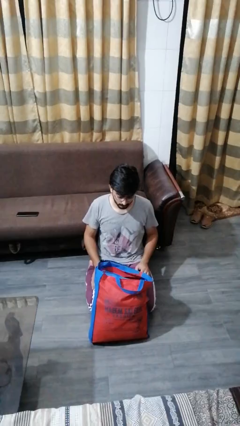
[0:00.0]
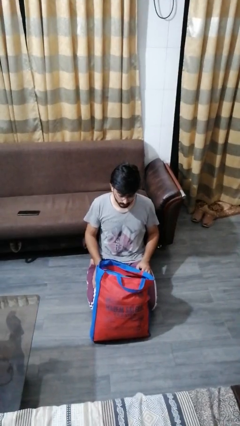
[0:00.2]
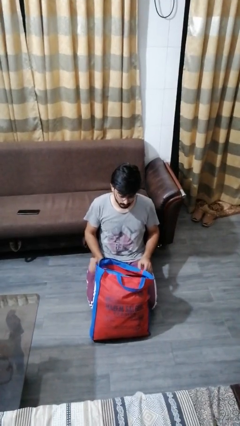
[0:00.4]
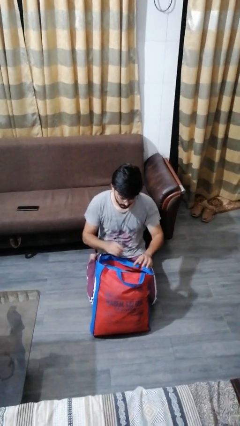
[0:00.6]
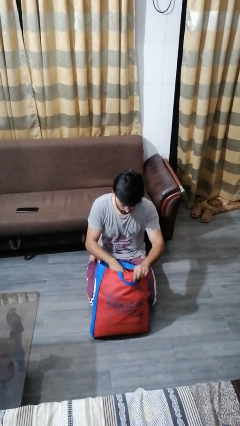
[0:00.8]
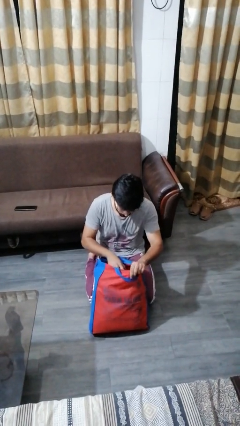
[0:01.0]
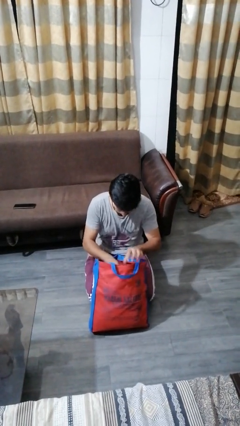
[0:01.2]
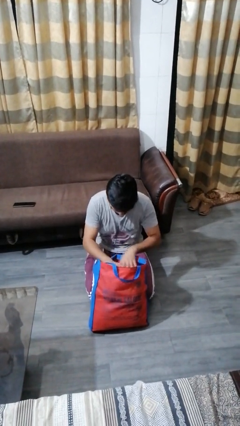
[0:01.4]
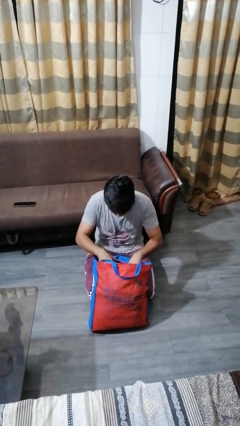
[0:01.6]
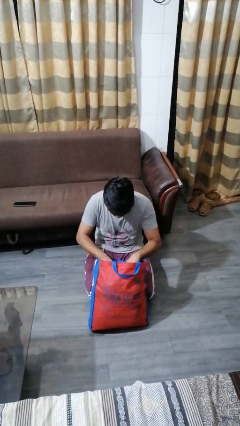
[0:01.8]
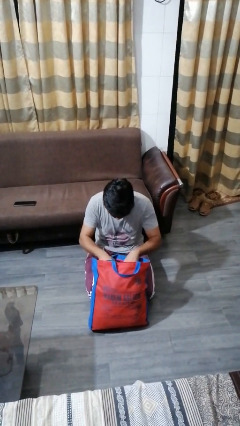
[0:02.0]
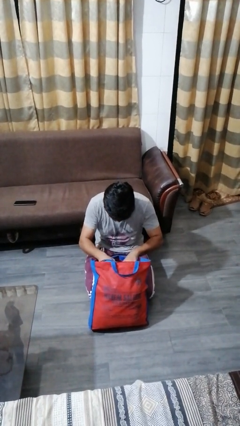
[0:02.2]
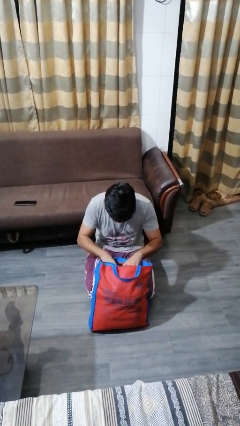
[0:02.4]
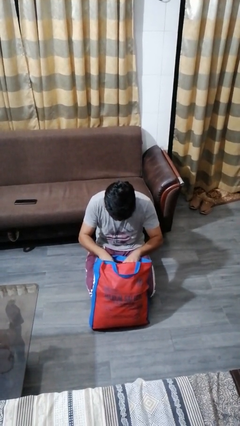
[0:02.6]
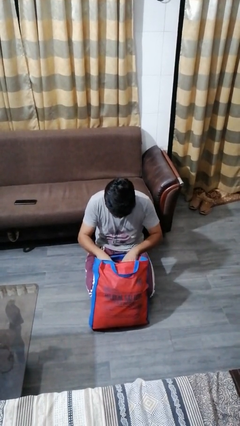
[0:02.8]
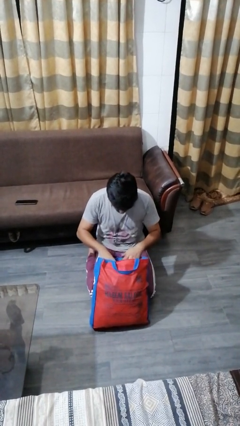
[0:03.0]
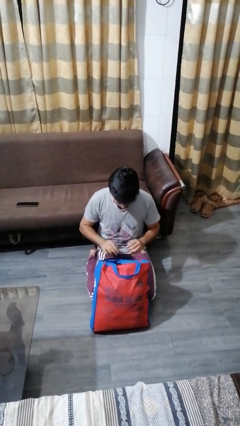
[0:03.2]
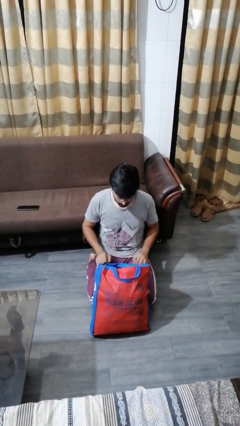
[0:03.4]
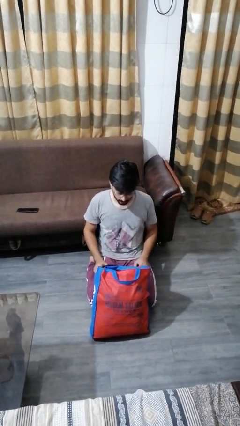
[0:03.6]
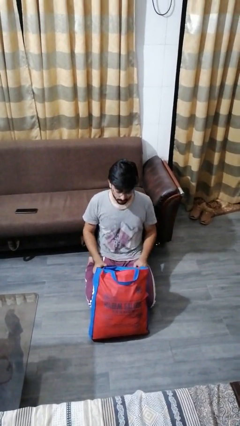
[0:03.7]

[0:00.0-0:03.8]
person searches in bag

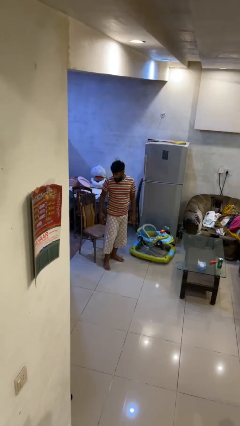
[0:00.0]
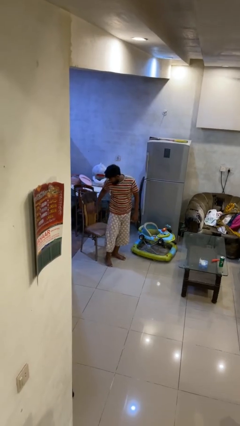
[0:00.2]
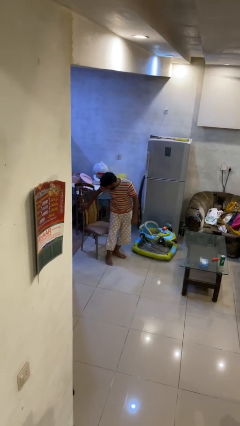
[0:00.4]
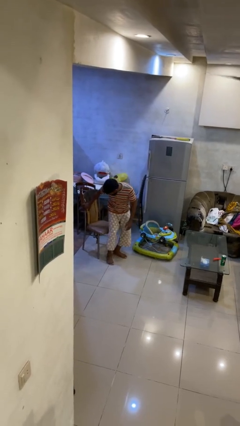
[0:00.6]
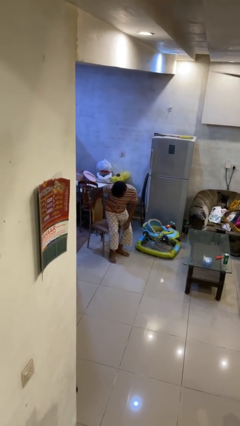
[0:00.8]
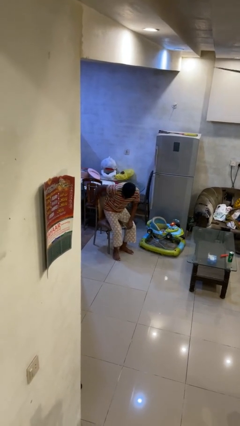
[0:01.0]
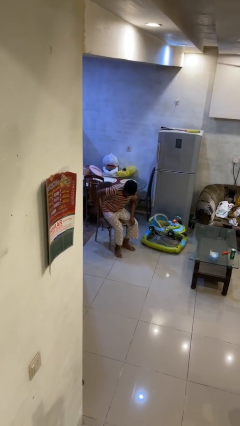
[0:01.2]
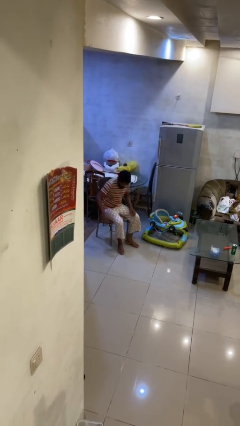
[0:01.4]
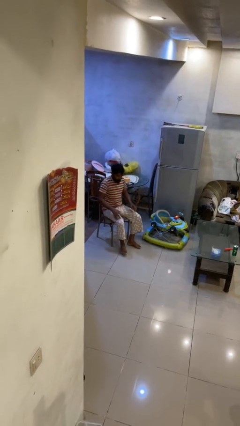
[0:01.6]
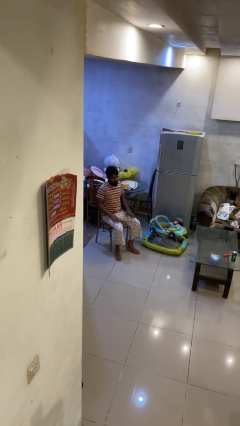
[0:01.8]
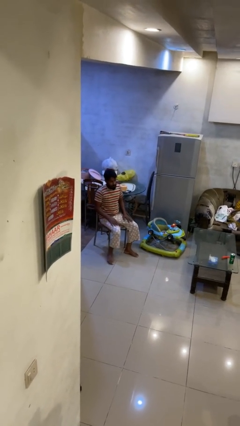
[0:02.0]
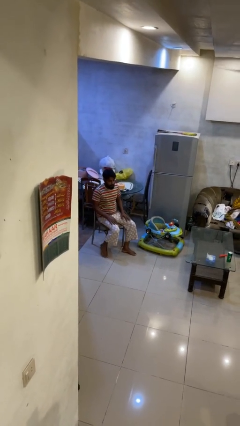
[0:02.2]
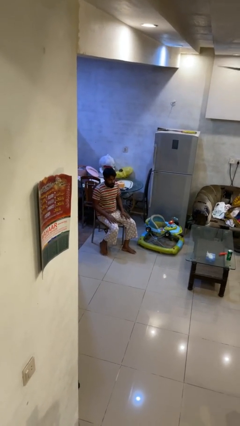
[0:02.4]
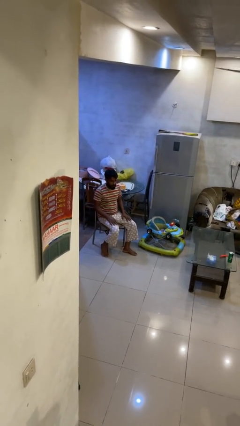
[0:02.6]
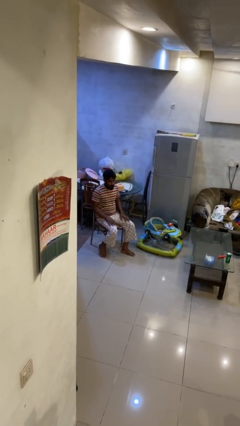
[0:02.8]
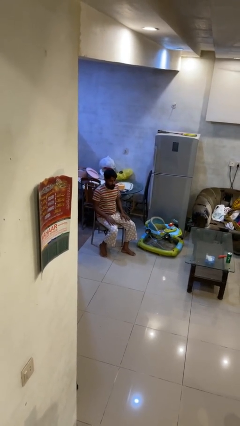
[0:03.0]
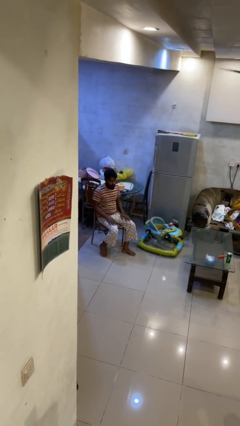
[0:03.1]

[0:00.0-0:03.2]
person sits down

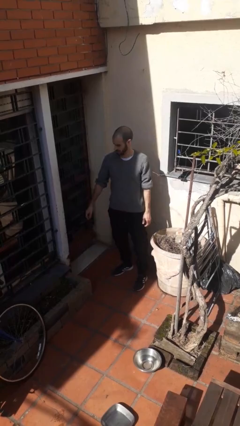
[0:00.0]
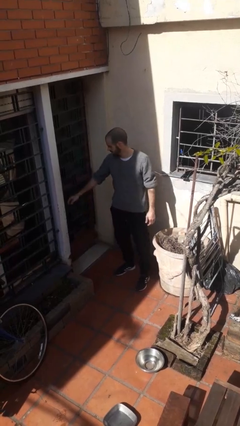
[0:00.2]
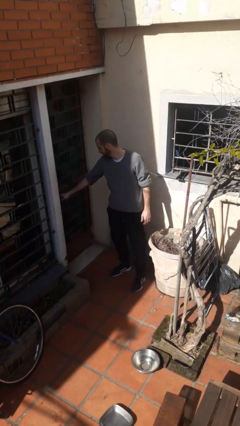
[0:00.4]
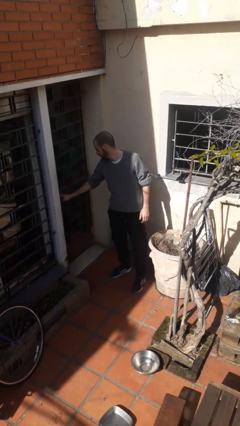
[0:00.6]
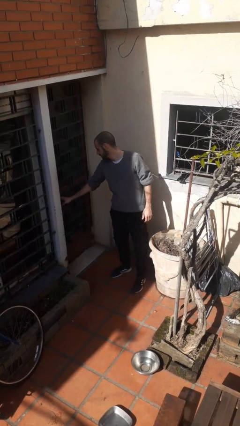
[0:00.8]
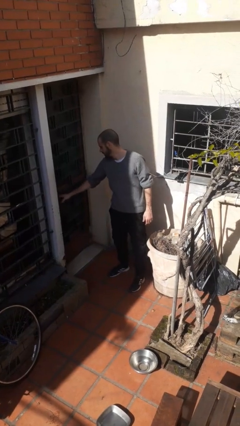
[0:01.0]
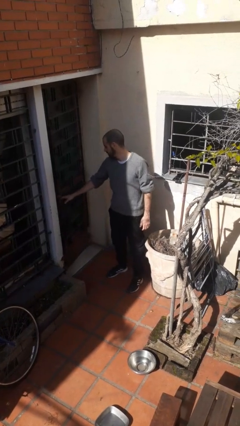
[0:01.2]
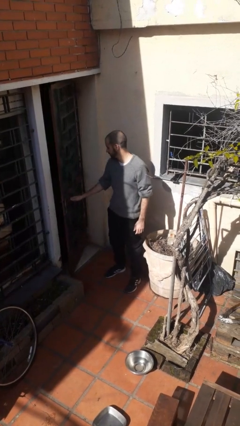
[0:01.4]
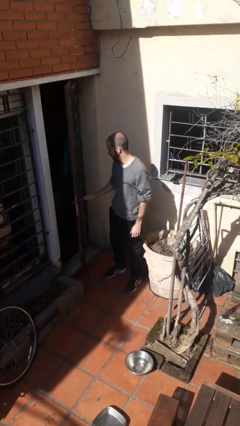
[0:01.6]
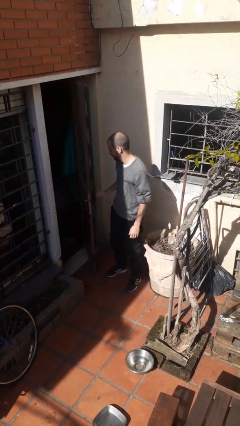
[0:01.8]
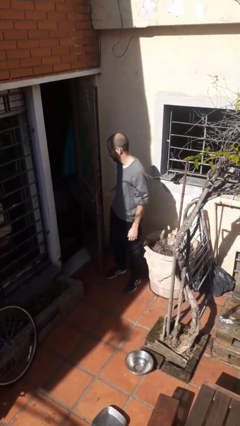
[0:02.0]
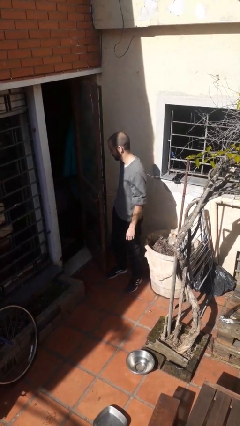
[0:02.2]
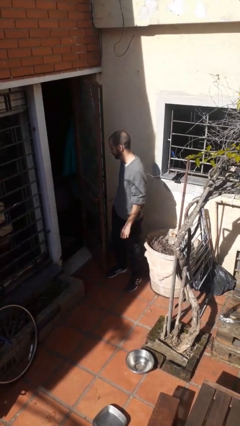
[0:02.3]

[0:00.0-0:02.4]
person opens facility door

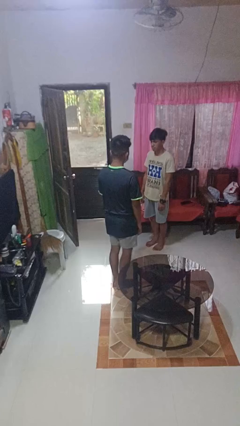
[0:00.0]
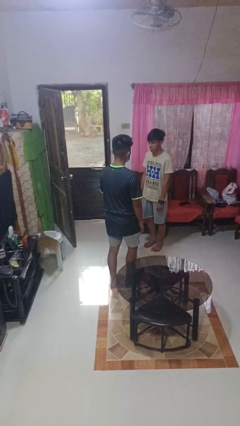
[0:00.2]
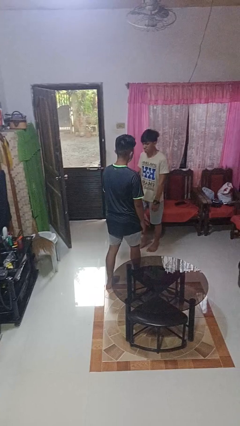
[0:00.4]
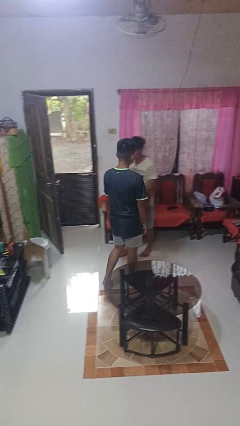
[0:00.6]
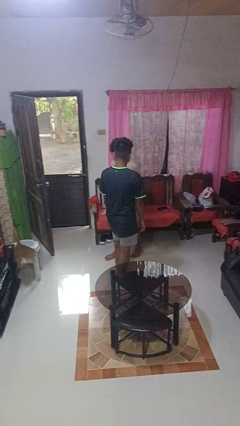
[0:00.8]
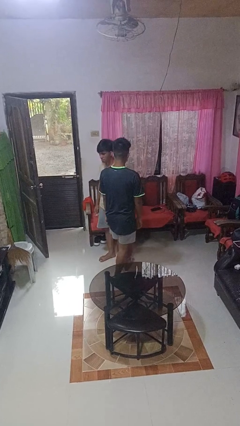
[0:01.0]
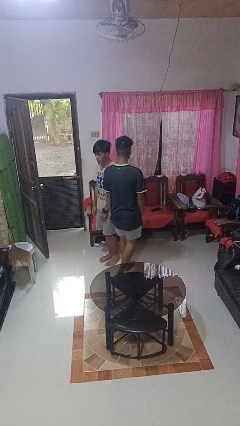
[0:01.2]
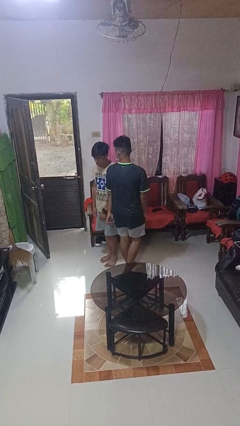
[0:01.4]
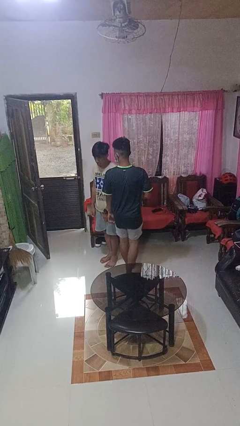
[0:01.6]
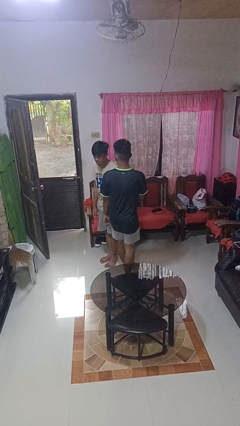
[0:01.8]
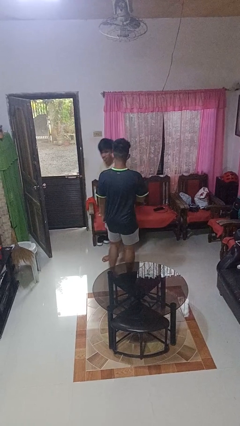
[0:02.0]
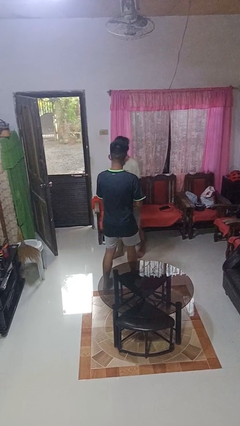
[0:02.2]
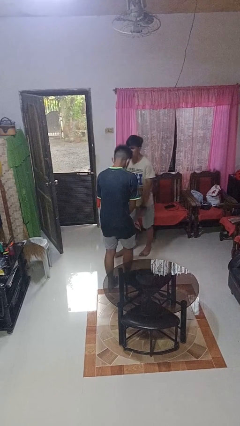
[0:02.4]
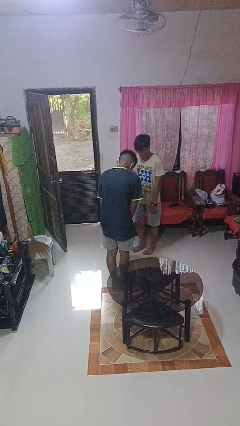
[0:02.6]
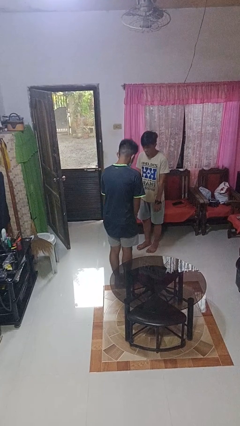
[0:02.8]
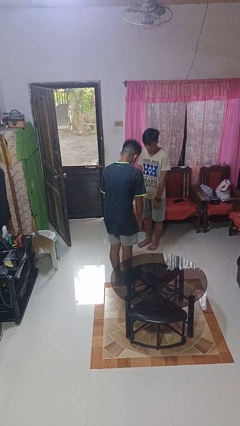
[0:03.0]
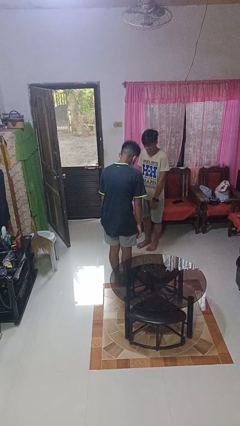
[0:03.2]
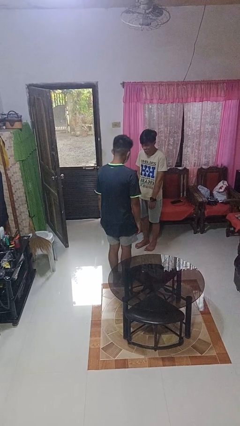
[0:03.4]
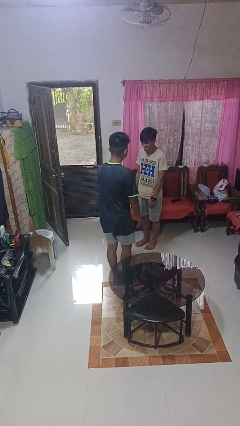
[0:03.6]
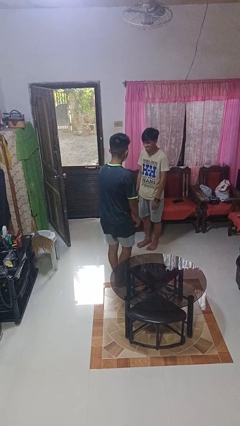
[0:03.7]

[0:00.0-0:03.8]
person bumps into person

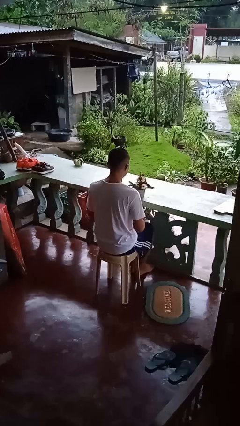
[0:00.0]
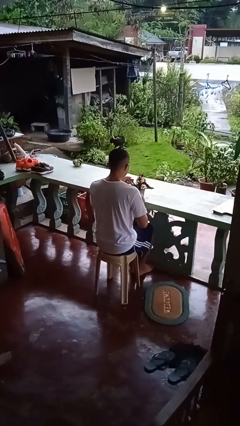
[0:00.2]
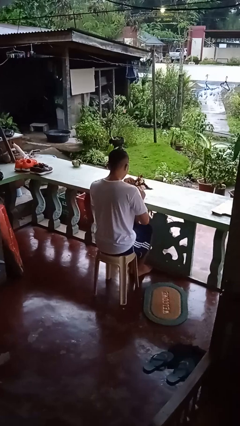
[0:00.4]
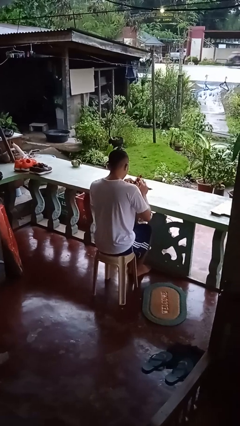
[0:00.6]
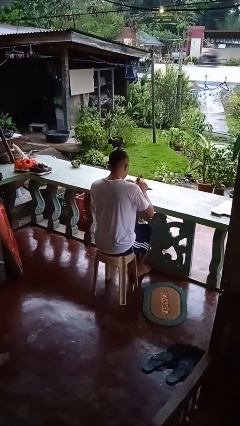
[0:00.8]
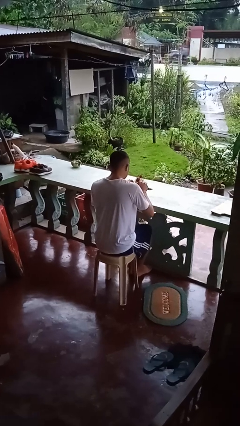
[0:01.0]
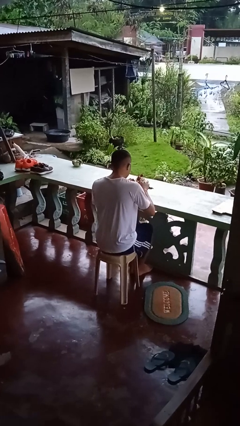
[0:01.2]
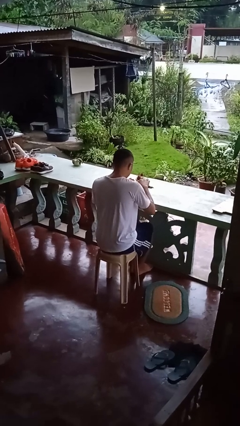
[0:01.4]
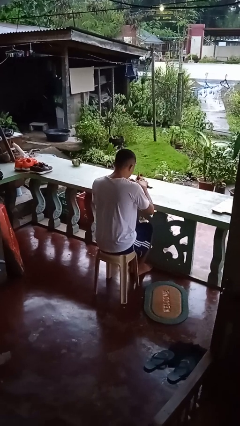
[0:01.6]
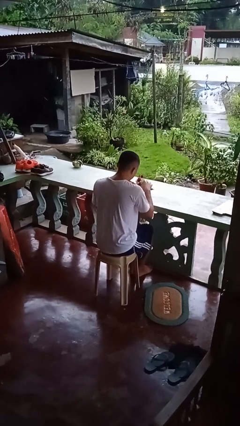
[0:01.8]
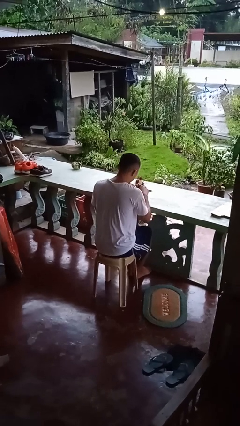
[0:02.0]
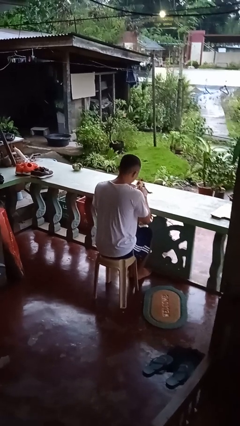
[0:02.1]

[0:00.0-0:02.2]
person arranges flowers in vase

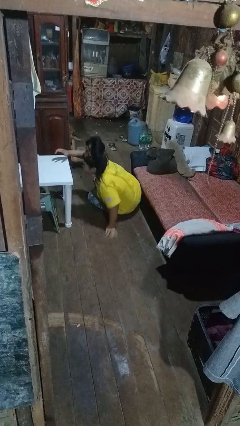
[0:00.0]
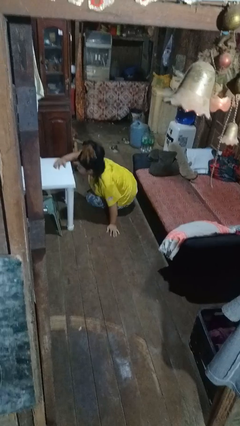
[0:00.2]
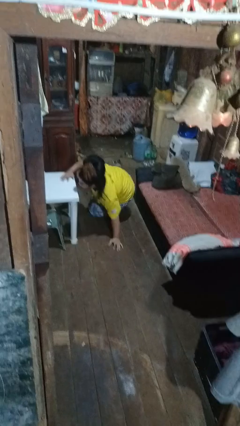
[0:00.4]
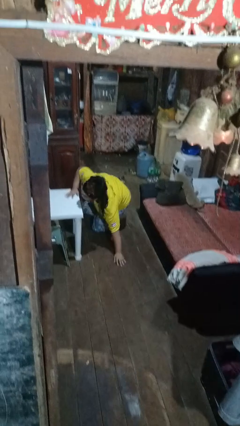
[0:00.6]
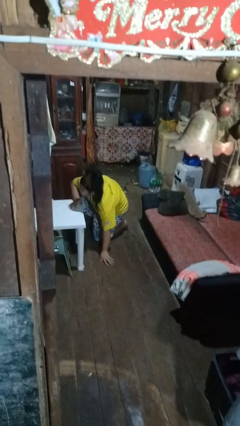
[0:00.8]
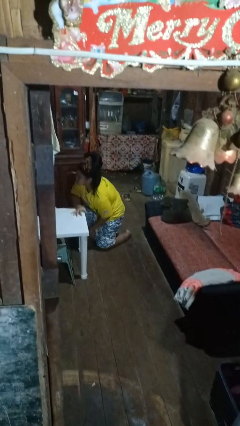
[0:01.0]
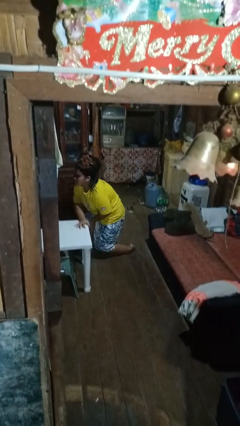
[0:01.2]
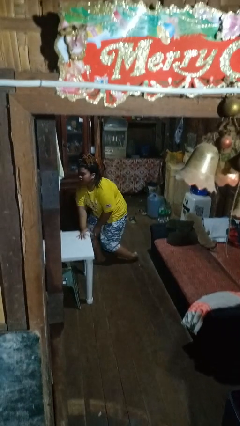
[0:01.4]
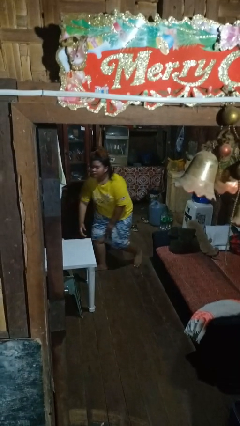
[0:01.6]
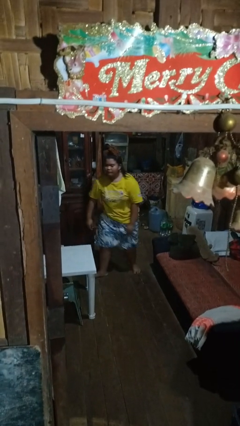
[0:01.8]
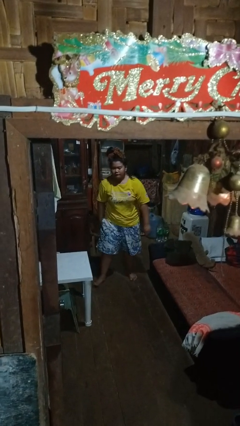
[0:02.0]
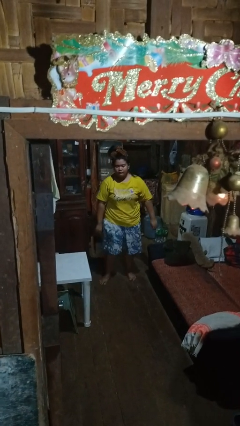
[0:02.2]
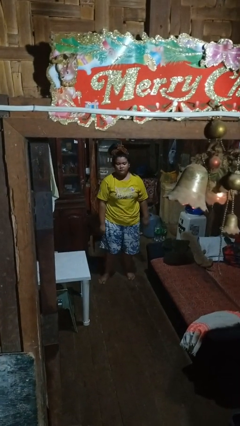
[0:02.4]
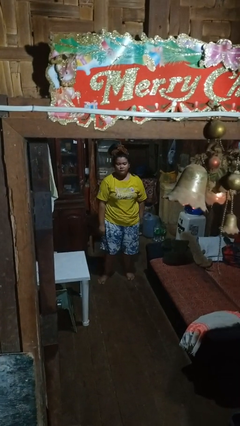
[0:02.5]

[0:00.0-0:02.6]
person stands up from floor
